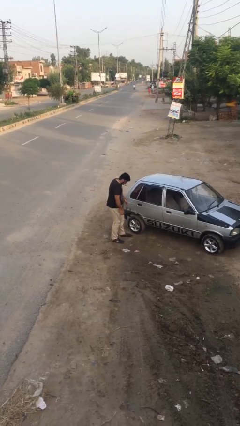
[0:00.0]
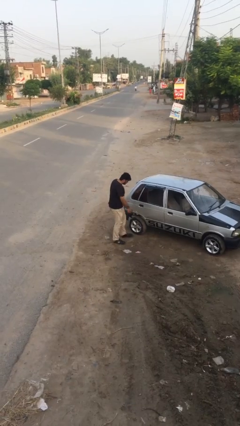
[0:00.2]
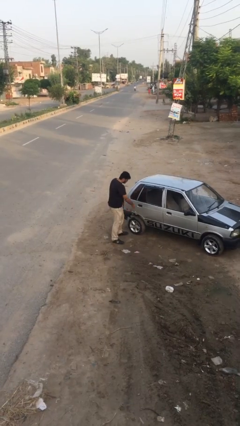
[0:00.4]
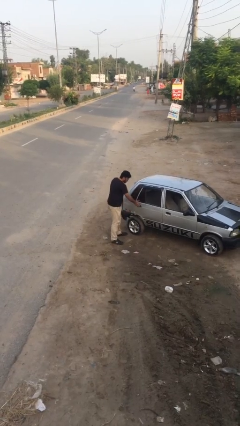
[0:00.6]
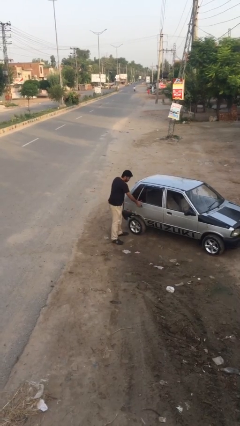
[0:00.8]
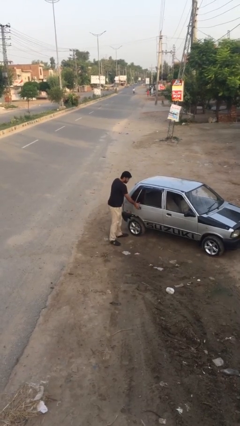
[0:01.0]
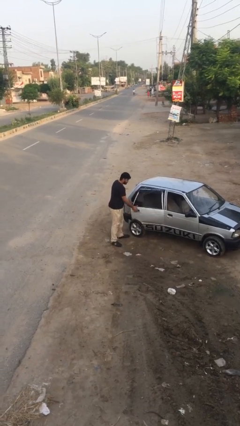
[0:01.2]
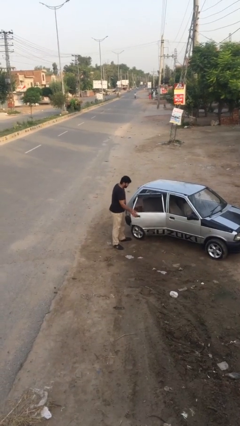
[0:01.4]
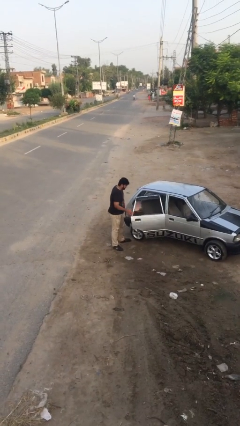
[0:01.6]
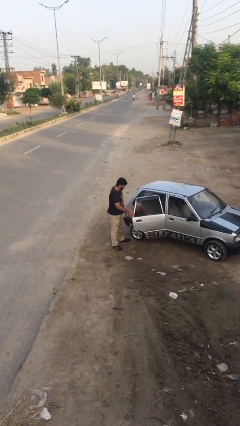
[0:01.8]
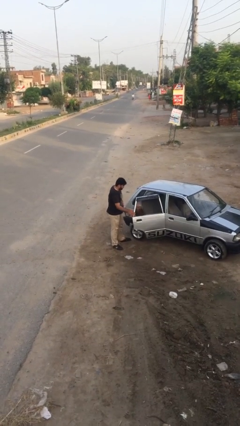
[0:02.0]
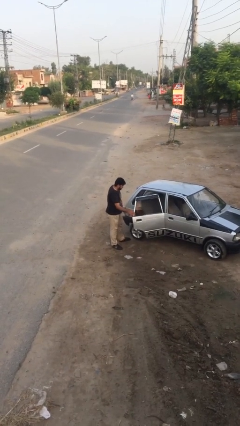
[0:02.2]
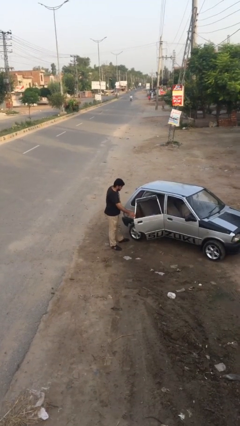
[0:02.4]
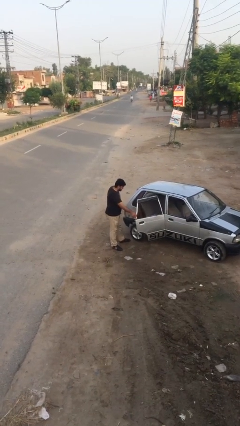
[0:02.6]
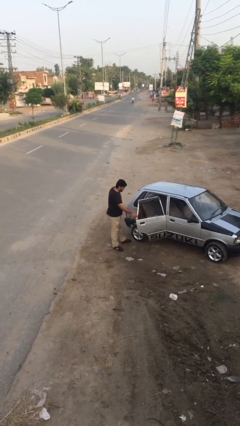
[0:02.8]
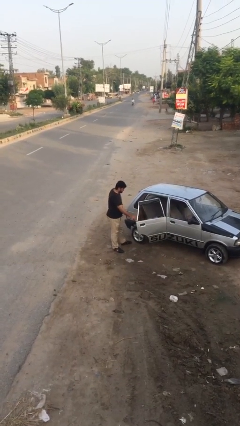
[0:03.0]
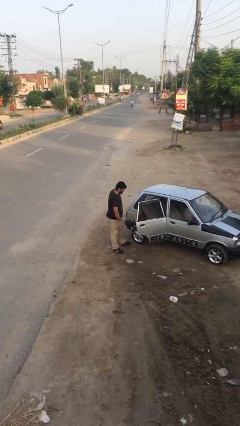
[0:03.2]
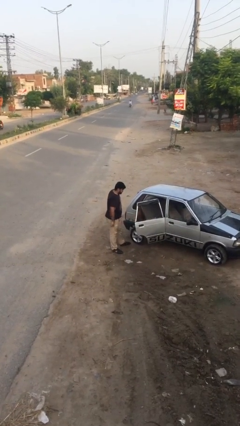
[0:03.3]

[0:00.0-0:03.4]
person opens car door

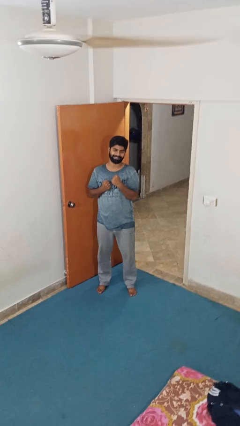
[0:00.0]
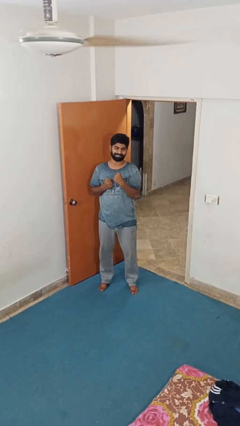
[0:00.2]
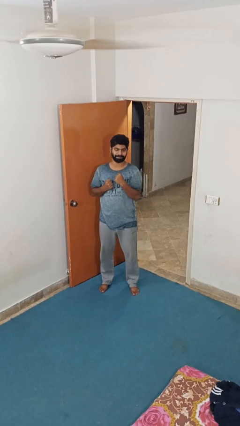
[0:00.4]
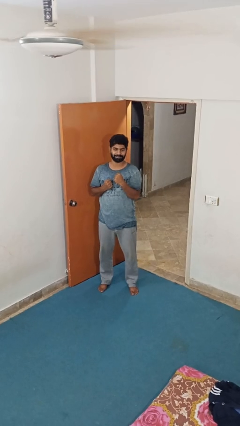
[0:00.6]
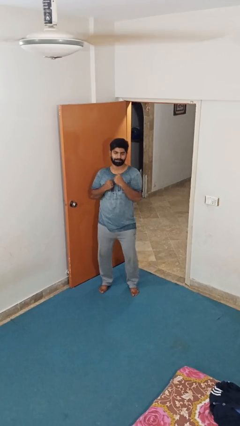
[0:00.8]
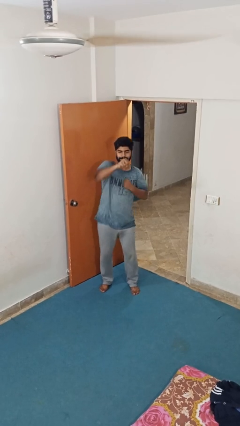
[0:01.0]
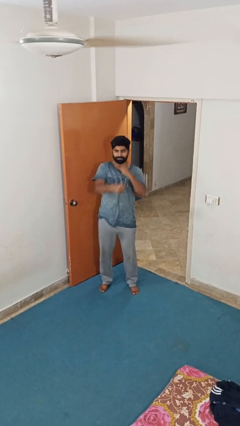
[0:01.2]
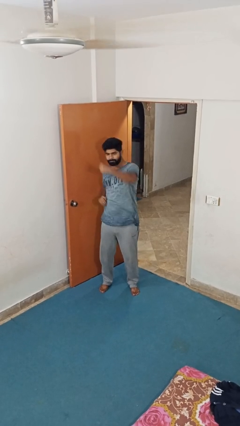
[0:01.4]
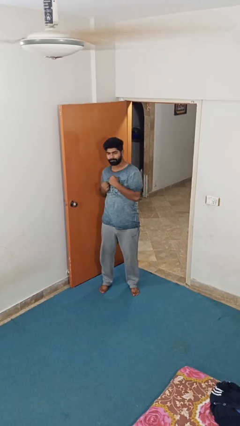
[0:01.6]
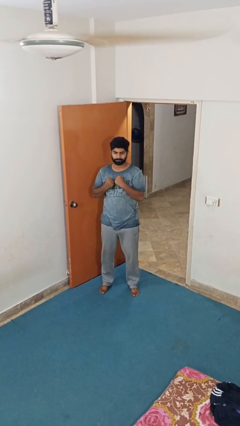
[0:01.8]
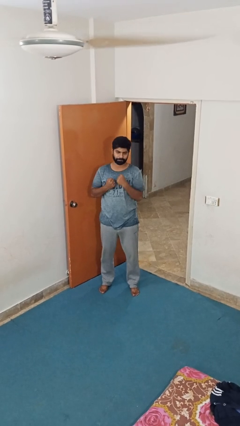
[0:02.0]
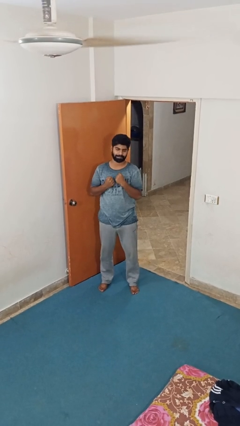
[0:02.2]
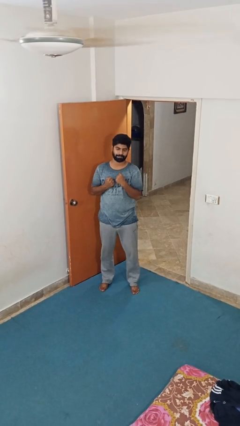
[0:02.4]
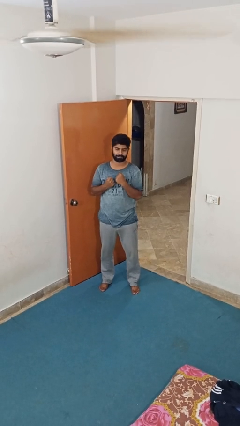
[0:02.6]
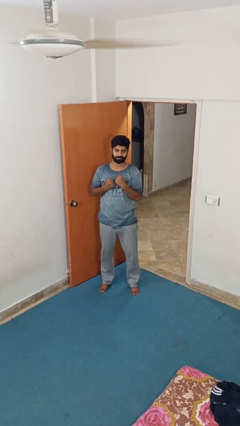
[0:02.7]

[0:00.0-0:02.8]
person punches

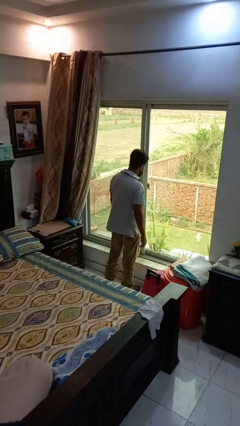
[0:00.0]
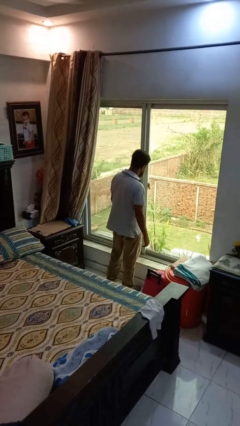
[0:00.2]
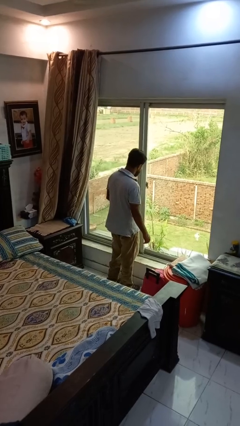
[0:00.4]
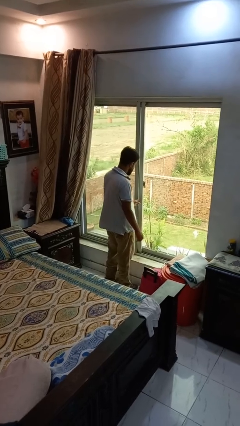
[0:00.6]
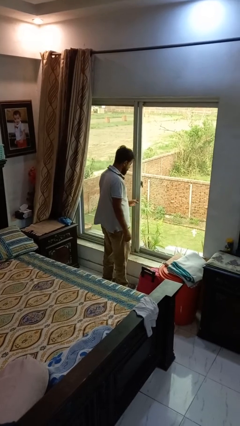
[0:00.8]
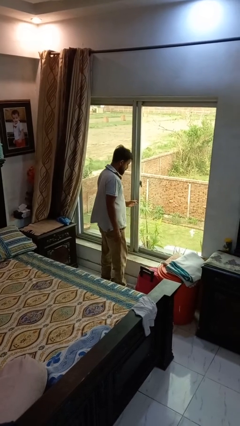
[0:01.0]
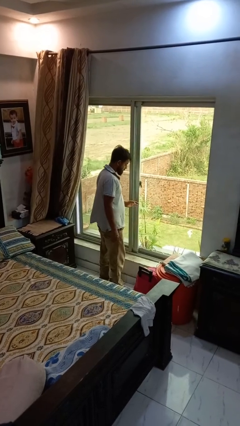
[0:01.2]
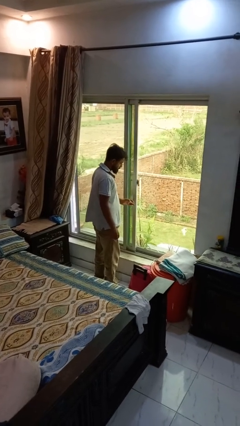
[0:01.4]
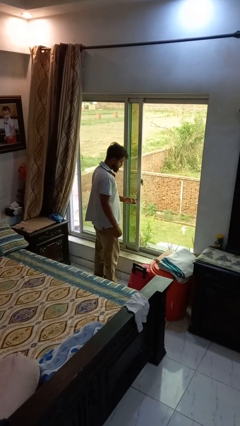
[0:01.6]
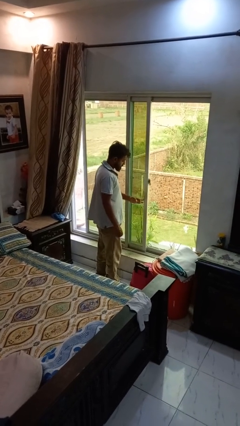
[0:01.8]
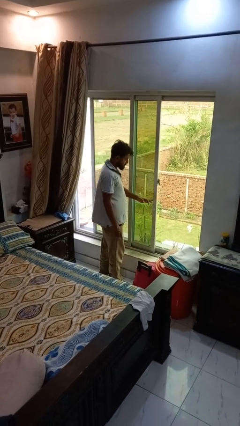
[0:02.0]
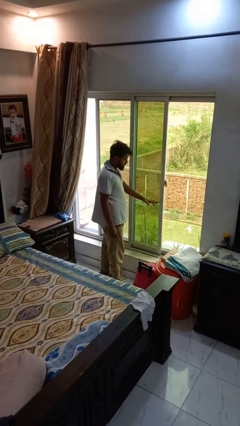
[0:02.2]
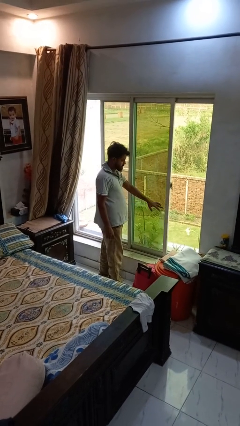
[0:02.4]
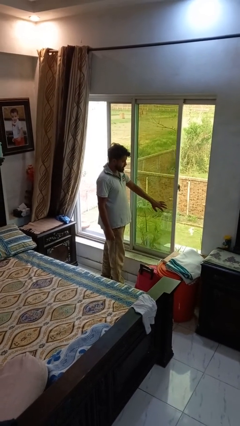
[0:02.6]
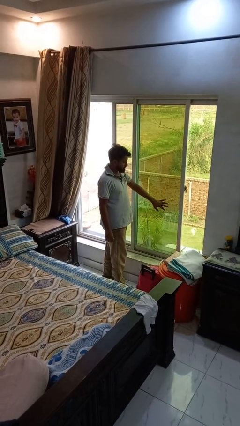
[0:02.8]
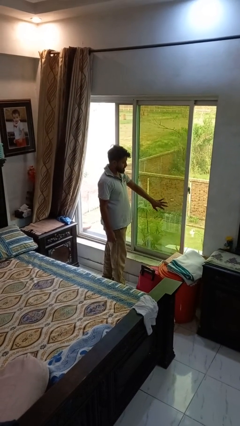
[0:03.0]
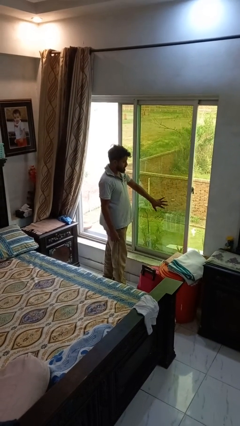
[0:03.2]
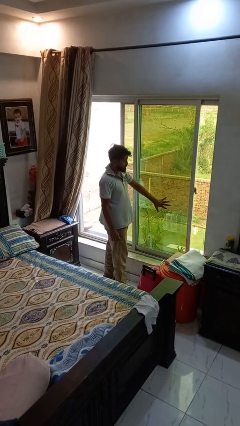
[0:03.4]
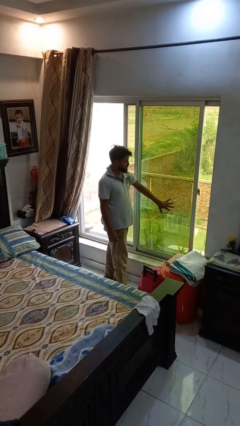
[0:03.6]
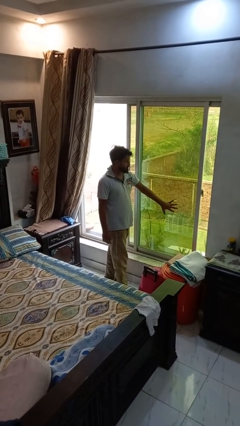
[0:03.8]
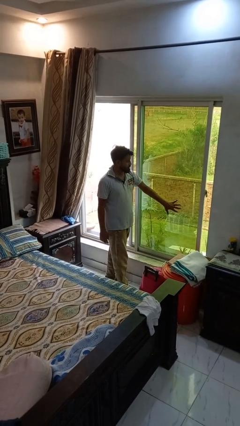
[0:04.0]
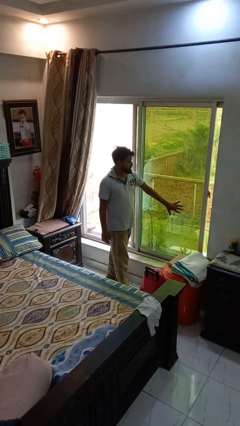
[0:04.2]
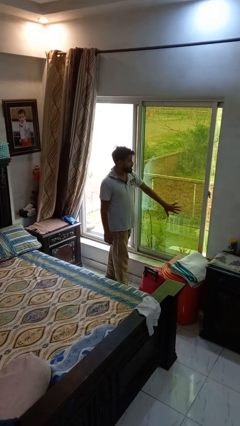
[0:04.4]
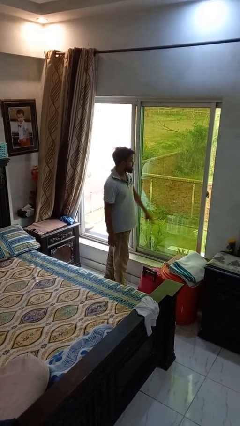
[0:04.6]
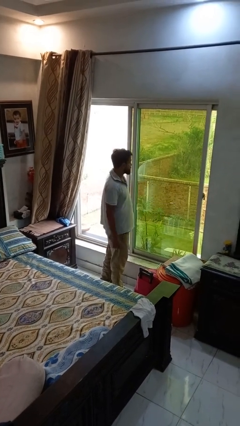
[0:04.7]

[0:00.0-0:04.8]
person opens sliding door

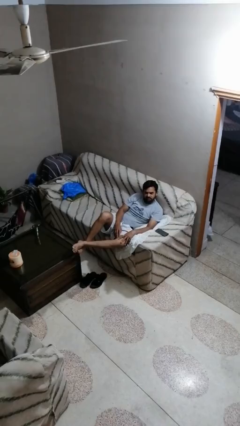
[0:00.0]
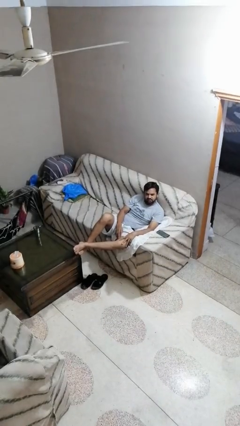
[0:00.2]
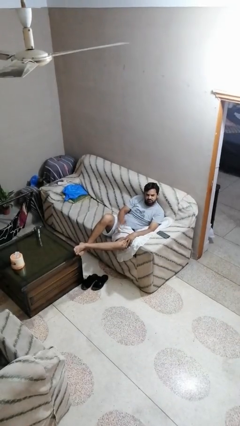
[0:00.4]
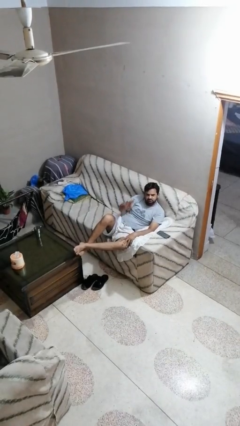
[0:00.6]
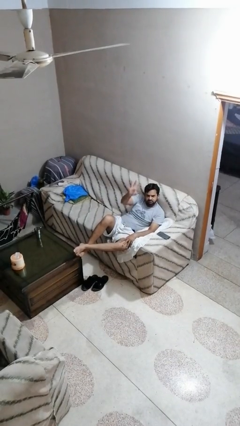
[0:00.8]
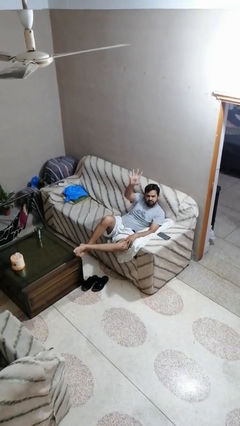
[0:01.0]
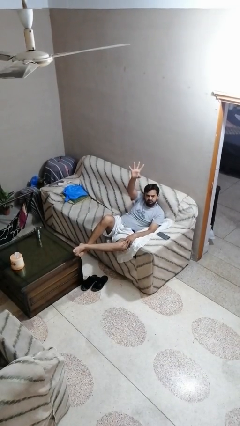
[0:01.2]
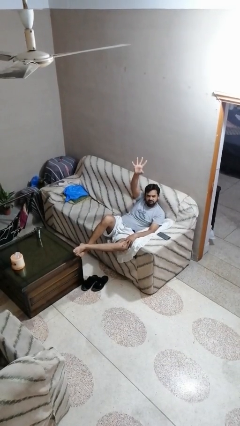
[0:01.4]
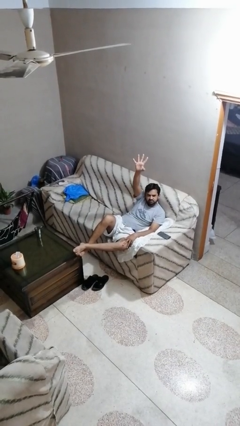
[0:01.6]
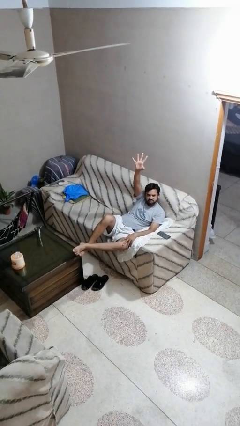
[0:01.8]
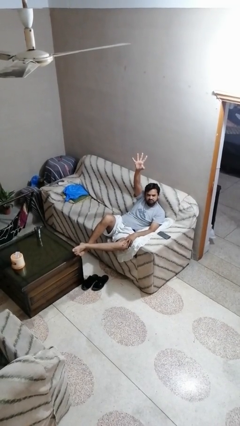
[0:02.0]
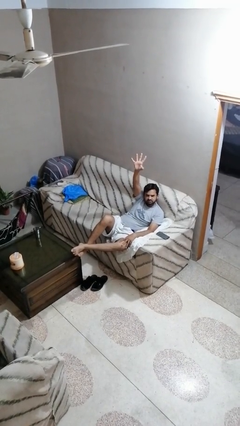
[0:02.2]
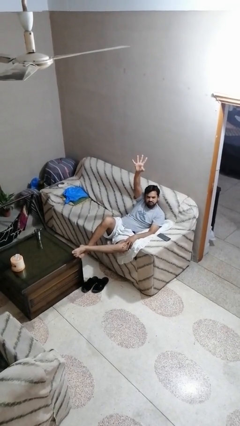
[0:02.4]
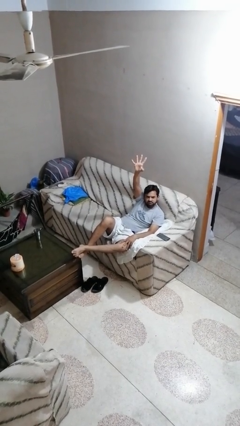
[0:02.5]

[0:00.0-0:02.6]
person gestures number four

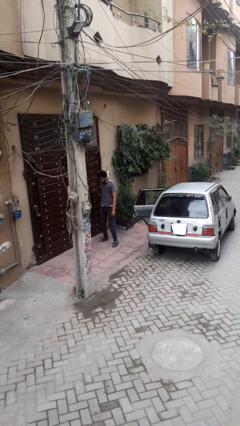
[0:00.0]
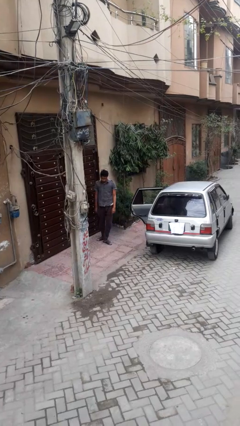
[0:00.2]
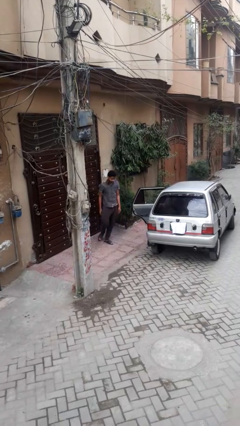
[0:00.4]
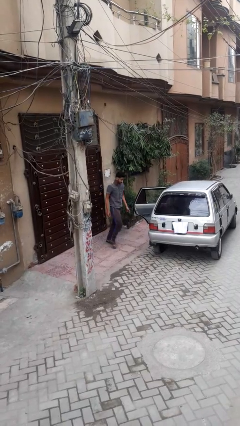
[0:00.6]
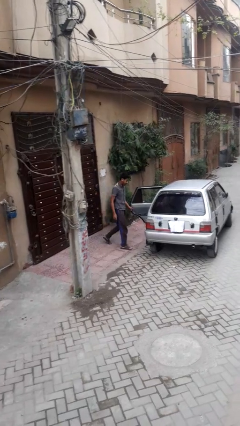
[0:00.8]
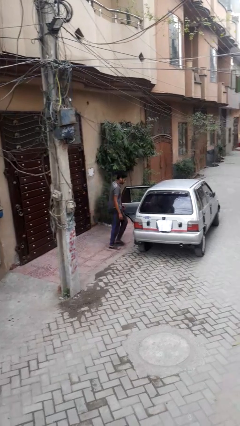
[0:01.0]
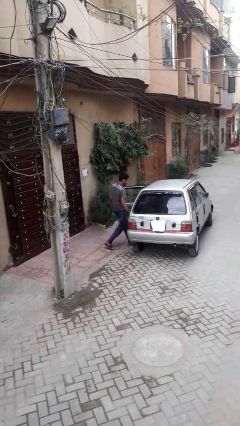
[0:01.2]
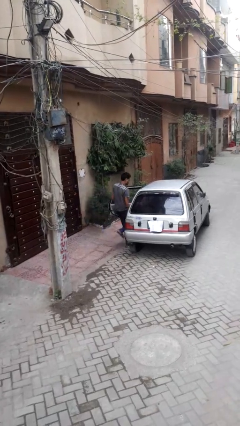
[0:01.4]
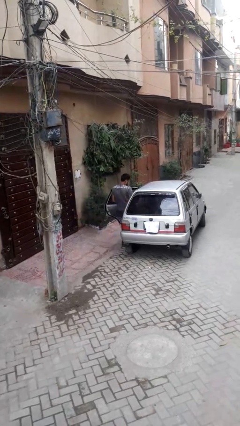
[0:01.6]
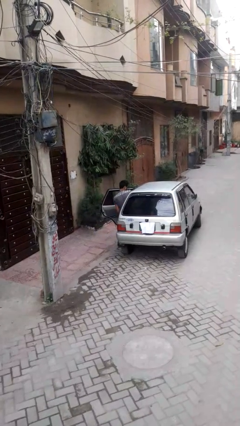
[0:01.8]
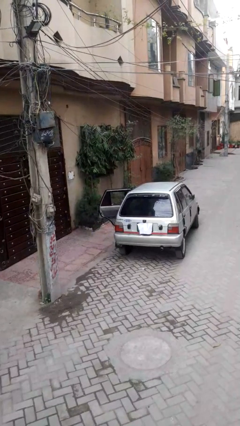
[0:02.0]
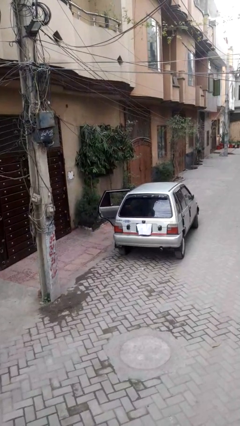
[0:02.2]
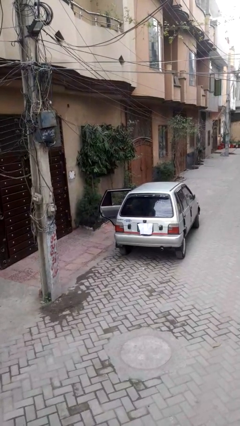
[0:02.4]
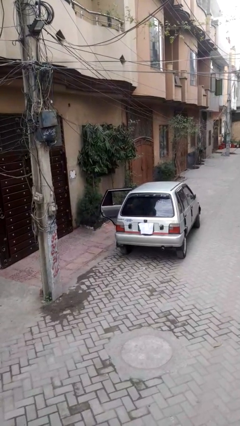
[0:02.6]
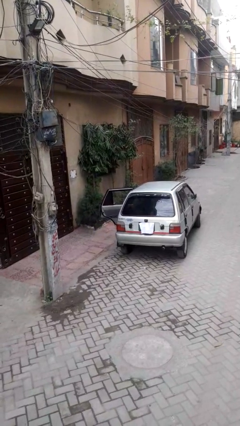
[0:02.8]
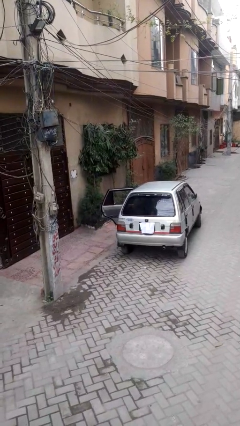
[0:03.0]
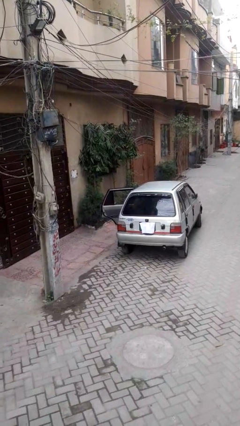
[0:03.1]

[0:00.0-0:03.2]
person enters car

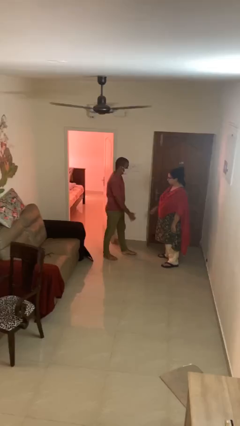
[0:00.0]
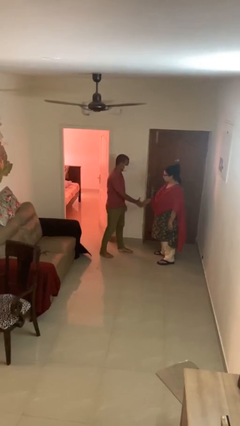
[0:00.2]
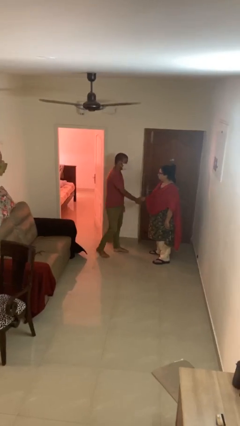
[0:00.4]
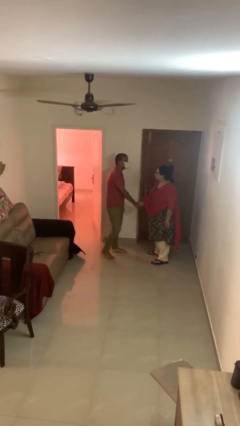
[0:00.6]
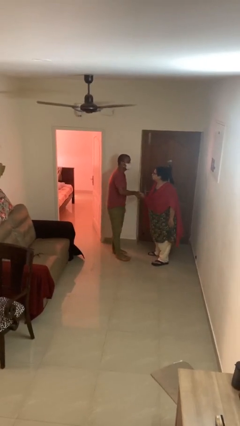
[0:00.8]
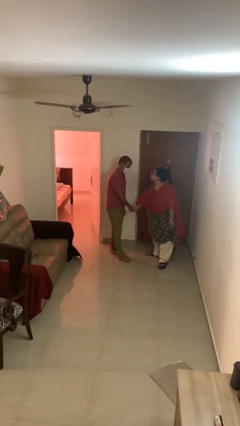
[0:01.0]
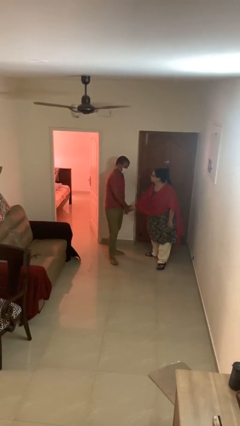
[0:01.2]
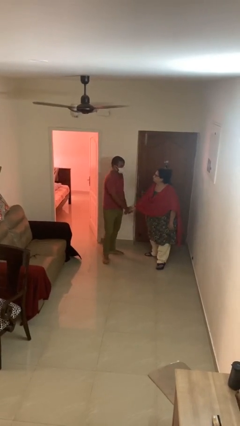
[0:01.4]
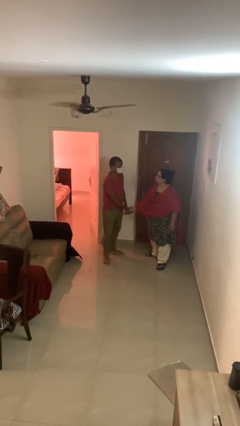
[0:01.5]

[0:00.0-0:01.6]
person shakes hand
